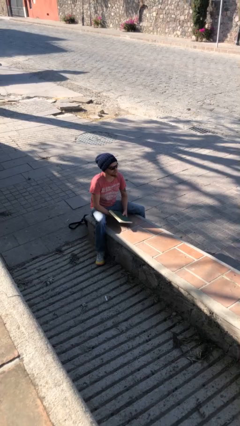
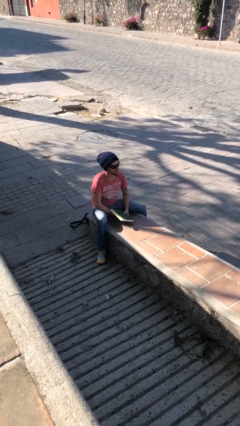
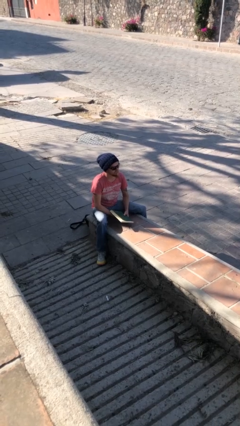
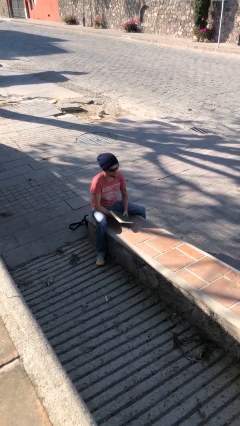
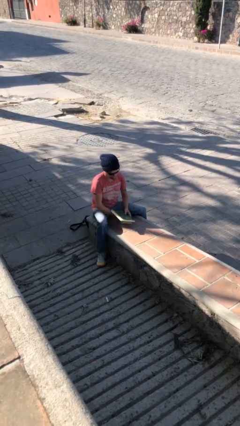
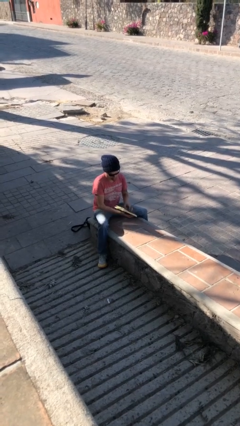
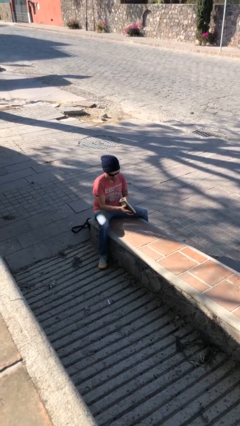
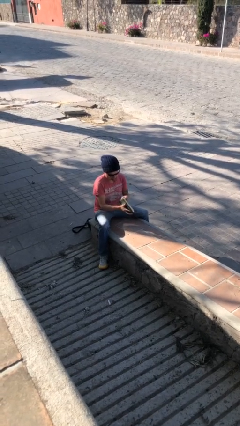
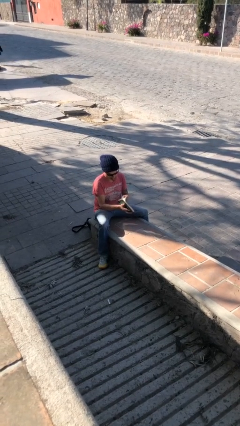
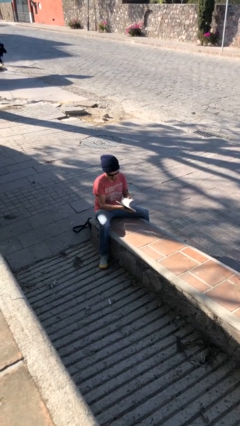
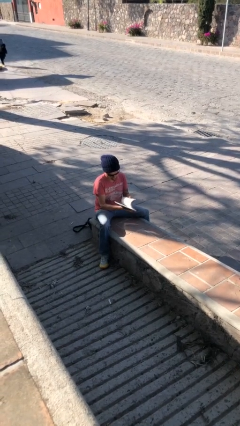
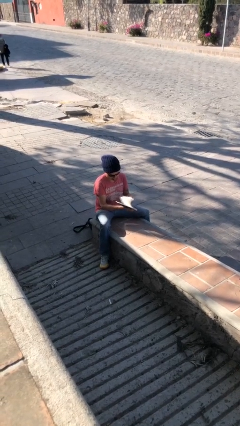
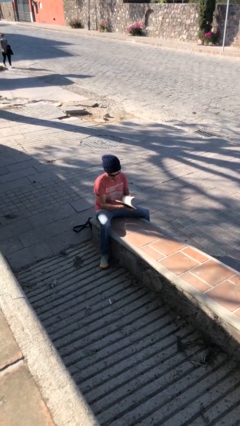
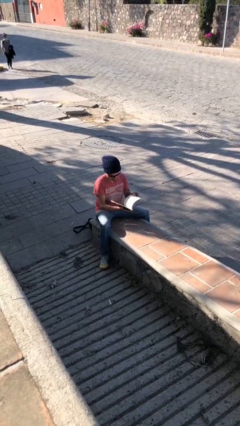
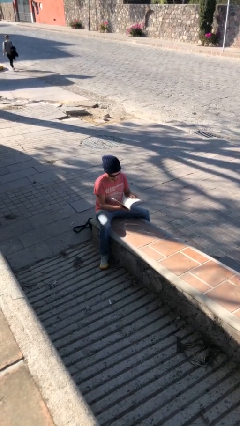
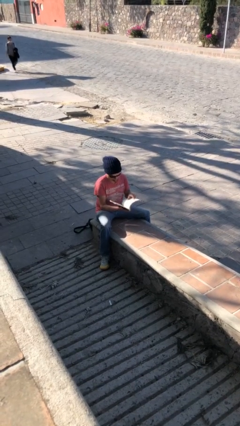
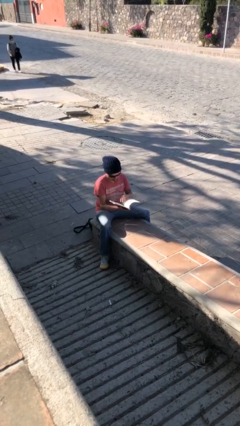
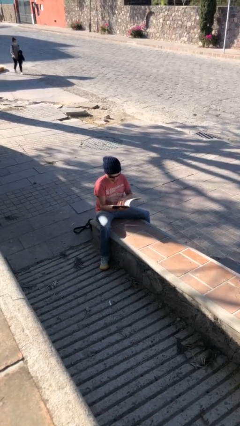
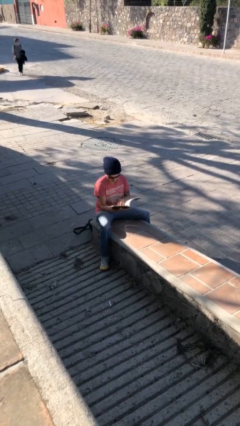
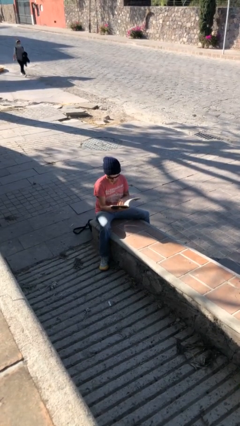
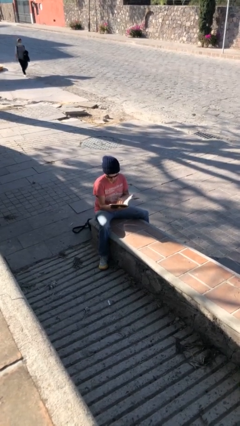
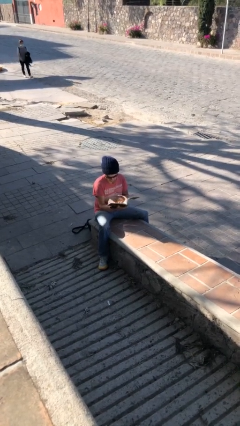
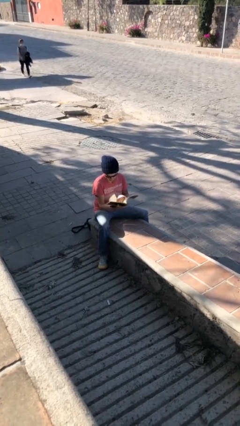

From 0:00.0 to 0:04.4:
person reads document

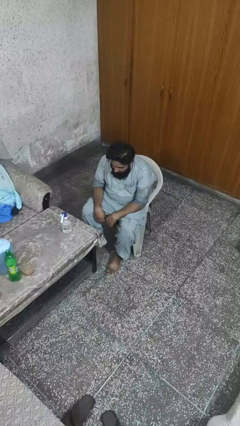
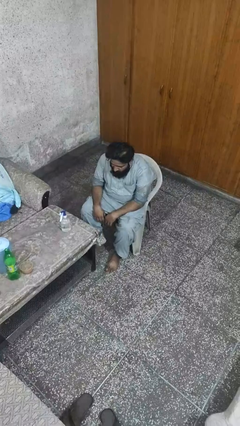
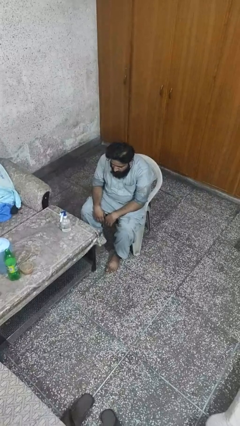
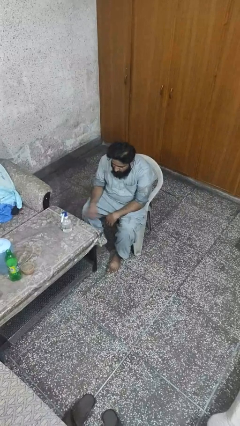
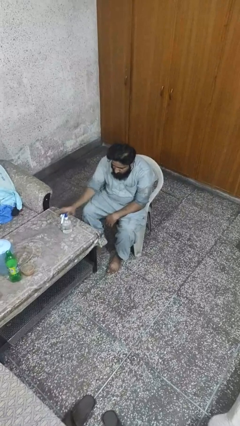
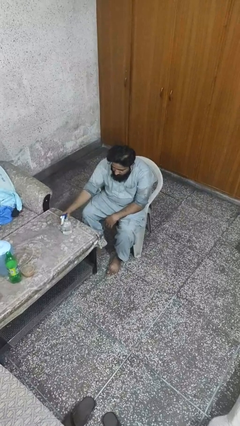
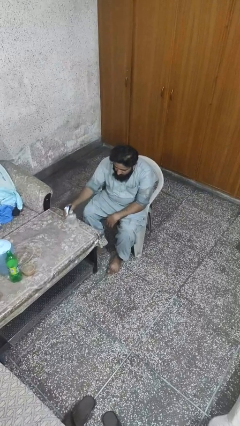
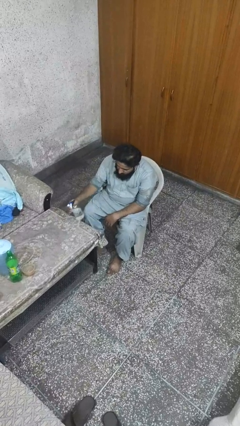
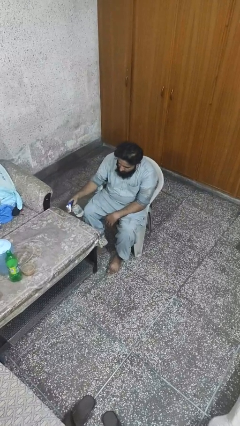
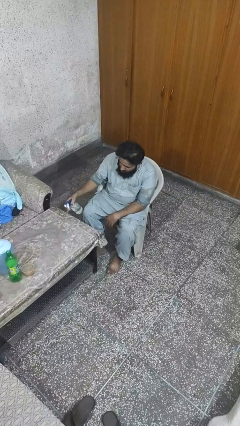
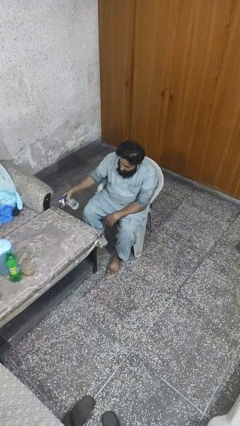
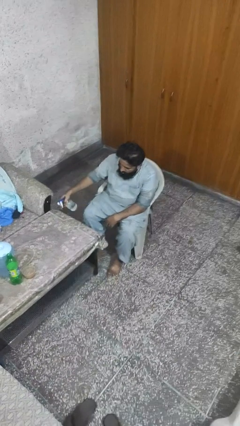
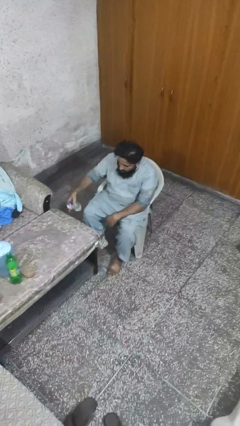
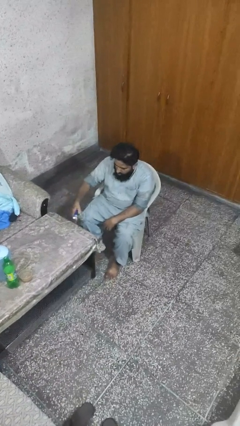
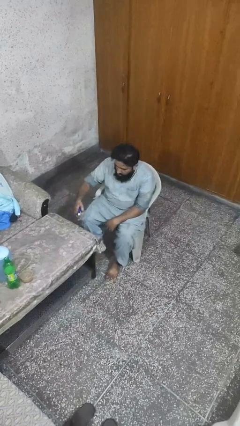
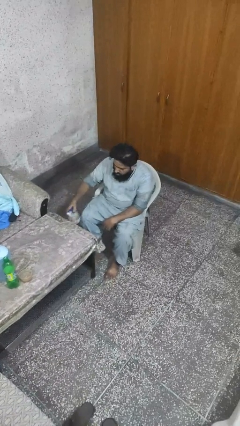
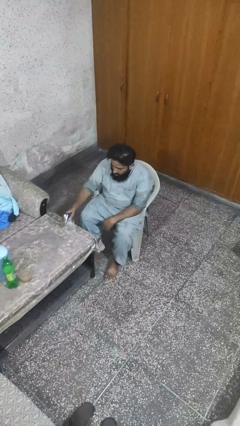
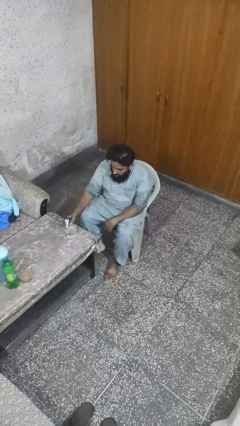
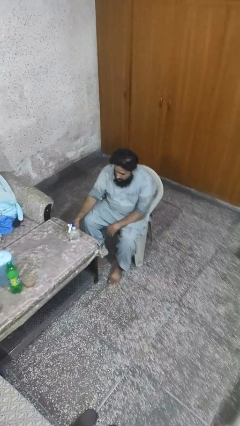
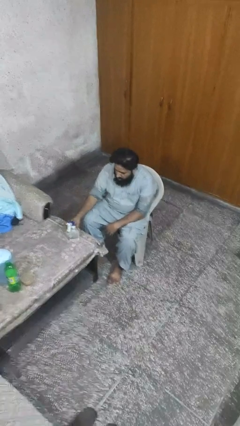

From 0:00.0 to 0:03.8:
person sprays from bottle

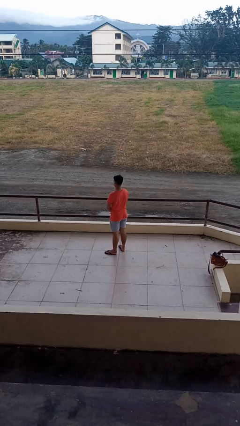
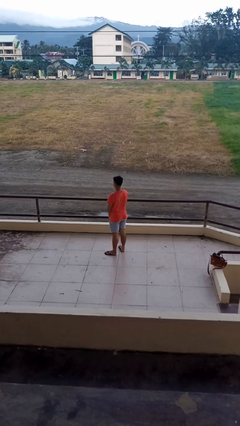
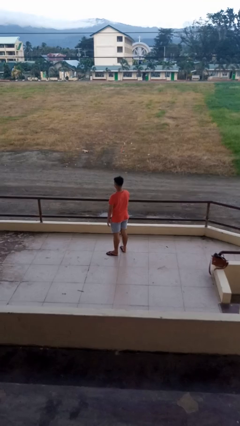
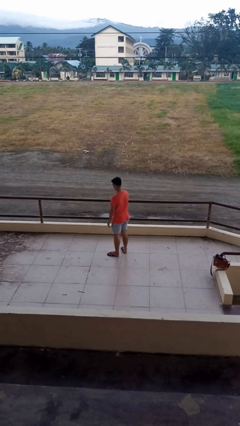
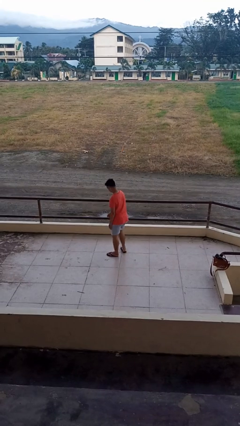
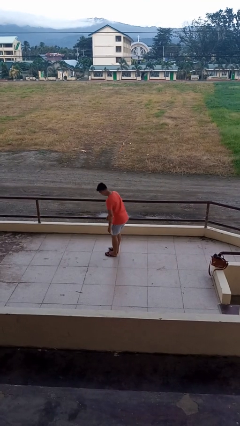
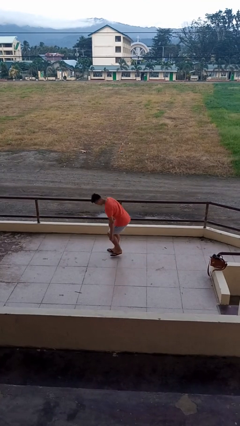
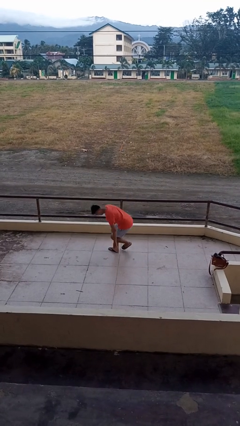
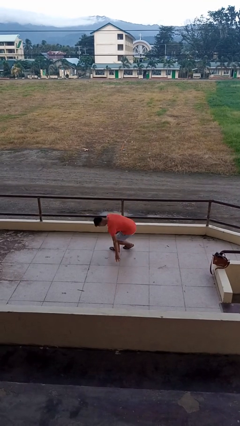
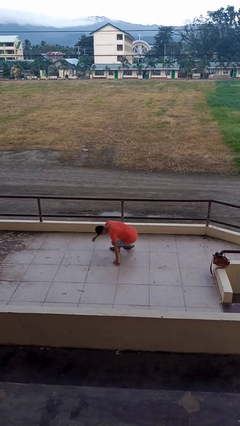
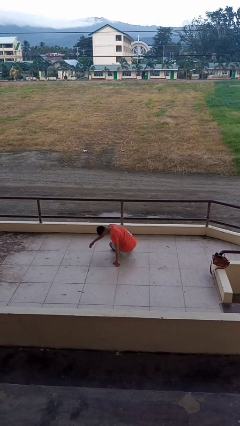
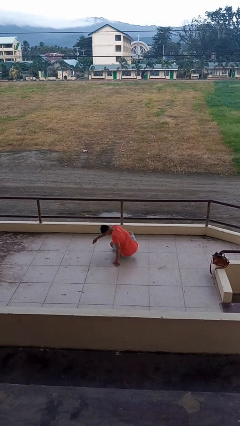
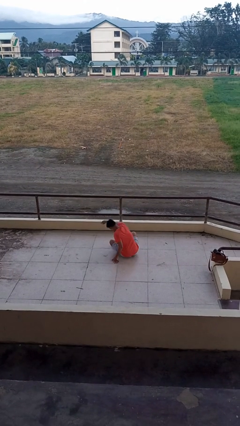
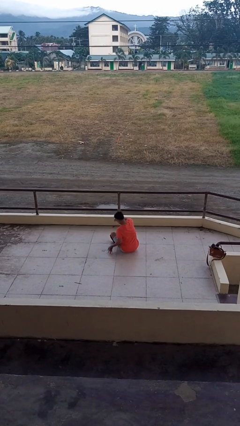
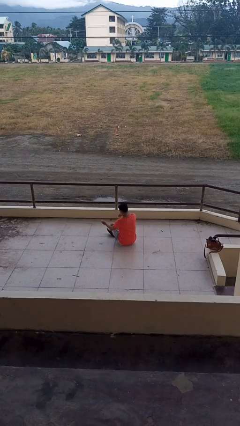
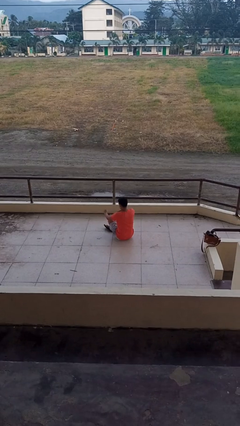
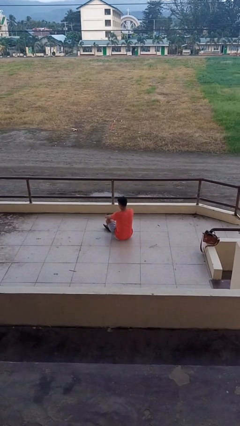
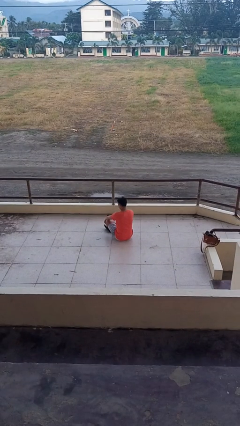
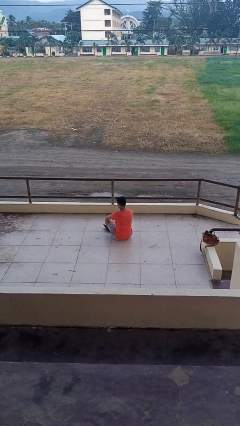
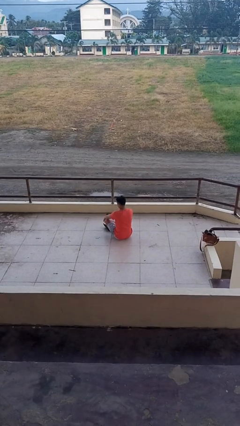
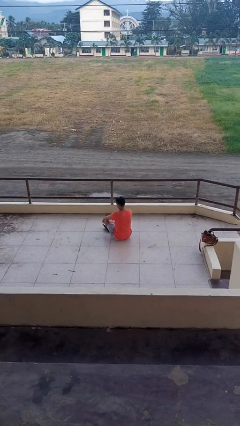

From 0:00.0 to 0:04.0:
person sits crisscross

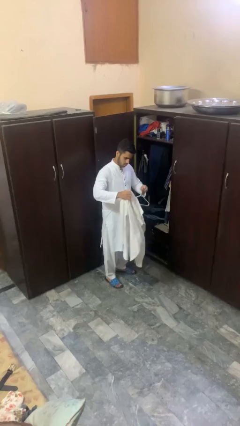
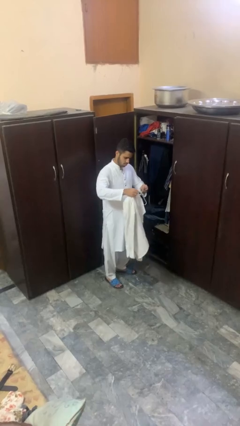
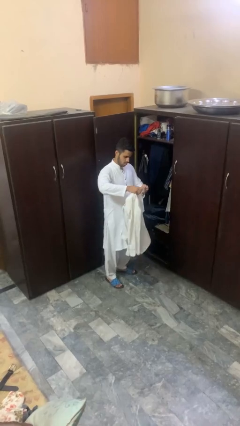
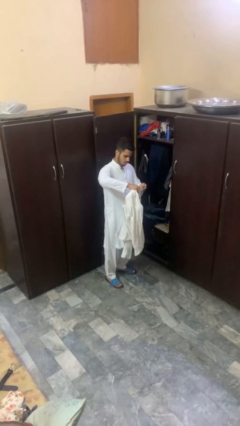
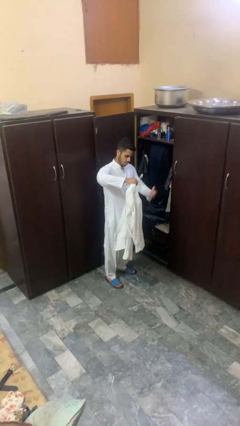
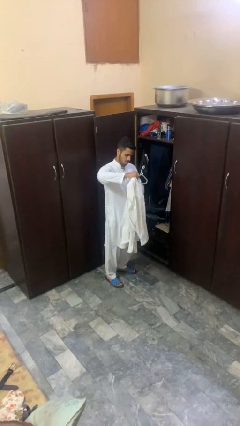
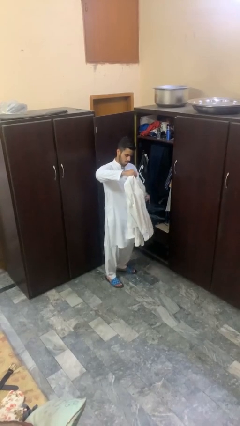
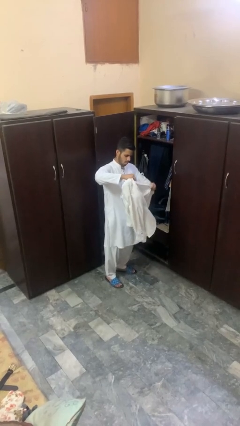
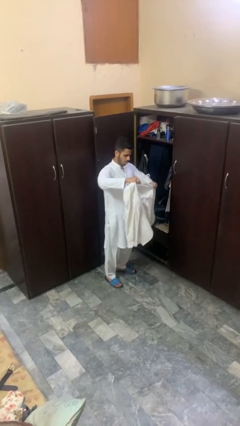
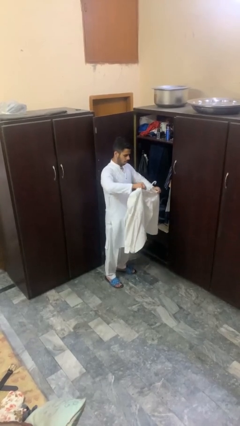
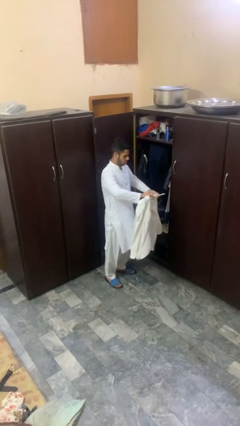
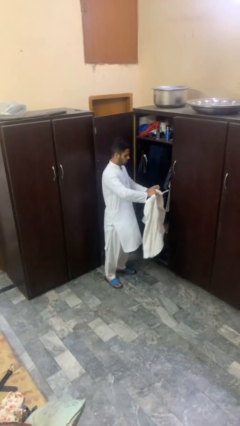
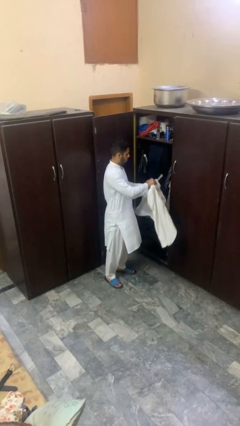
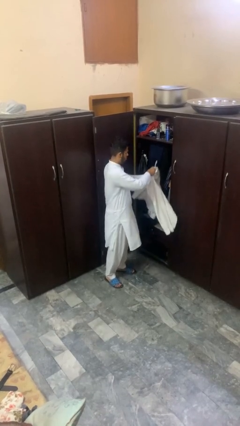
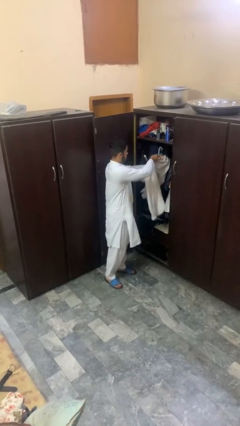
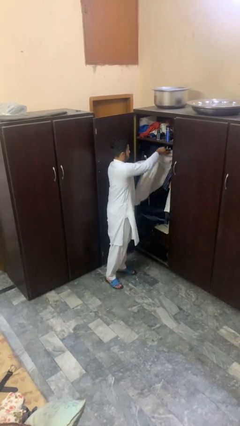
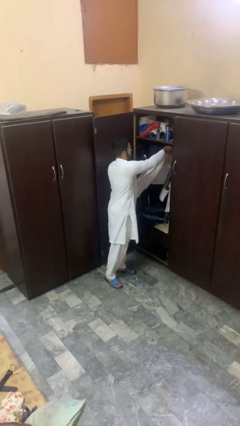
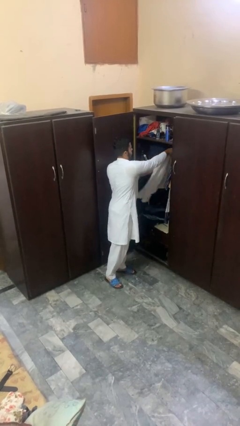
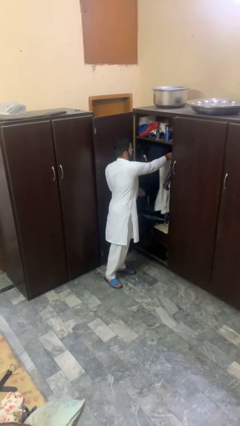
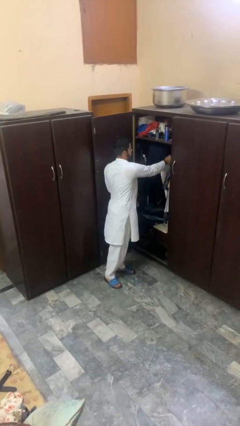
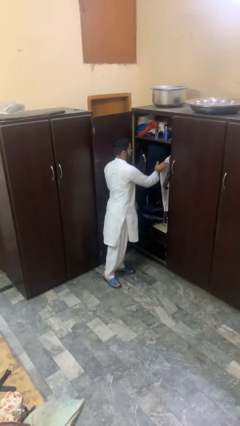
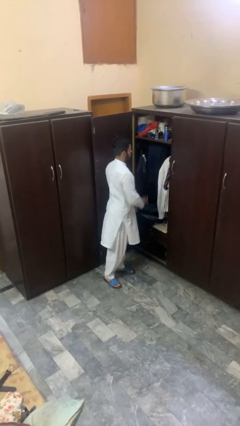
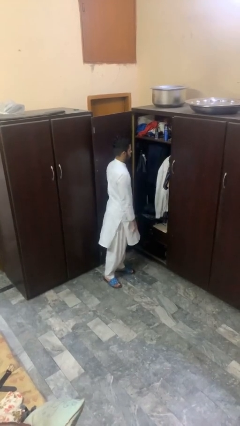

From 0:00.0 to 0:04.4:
person puts clothes into closet

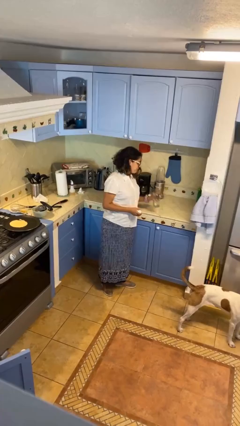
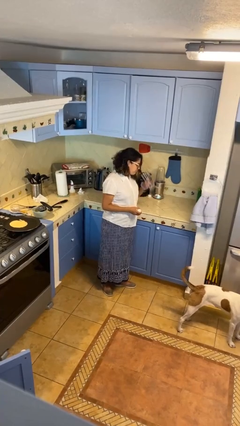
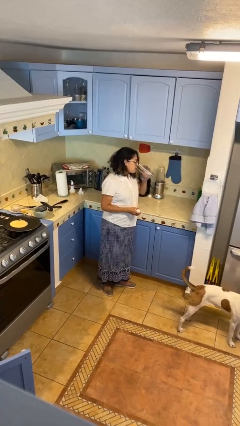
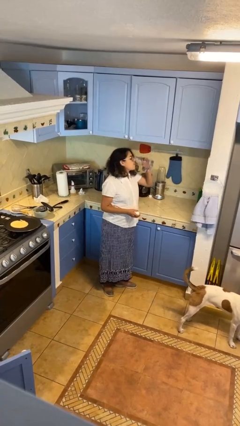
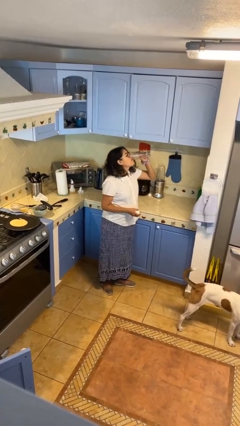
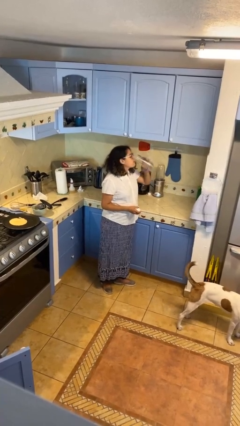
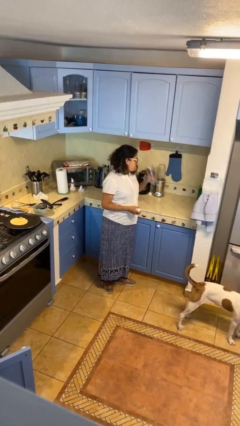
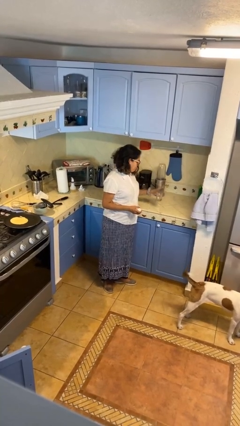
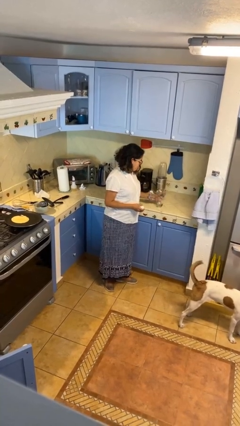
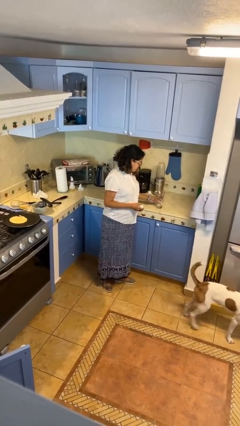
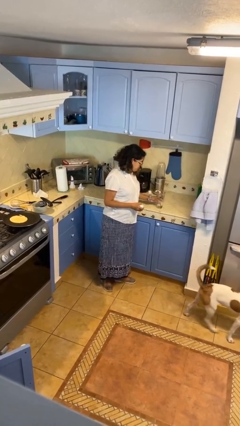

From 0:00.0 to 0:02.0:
person drinks from cup
